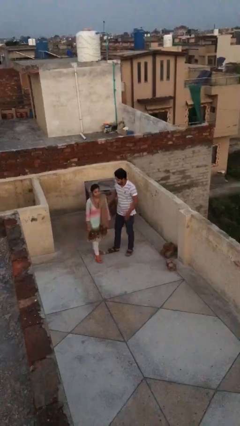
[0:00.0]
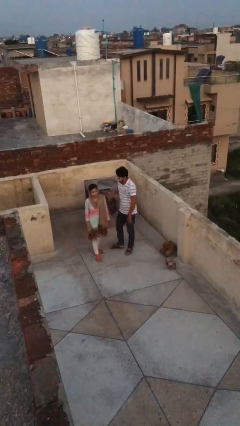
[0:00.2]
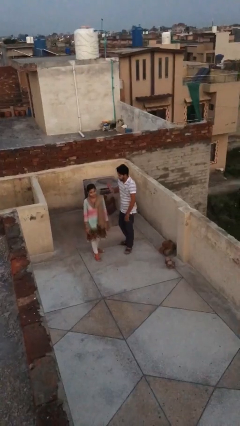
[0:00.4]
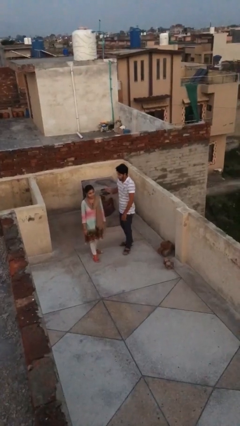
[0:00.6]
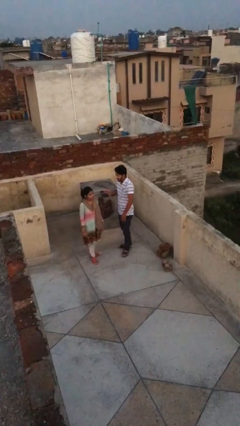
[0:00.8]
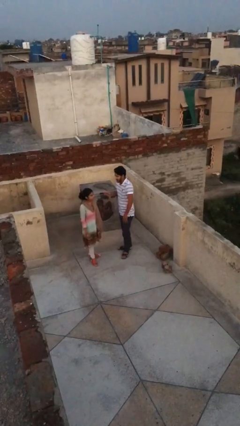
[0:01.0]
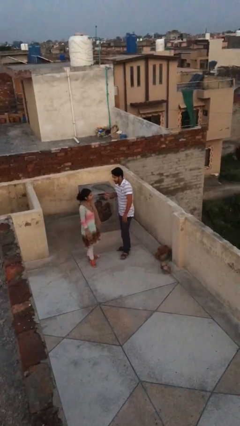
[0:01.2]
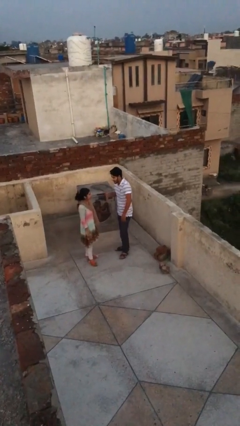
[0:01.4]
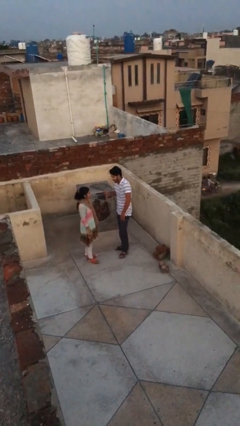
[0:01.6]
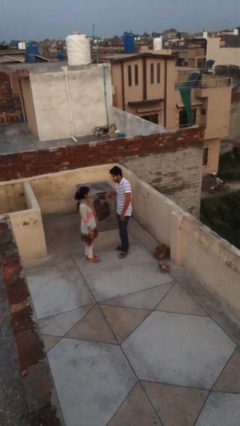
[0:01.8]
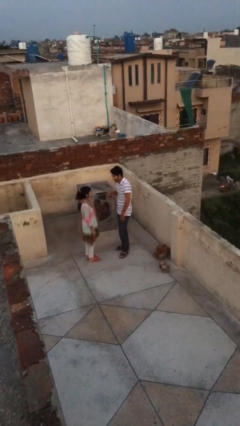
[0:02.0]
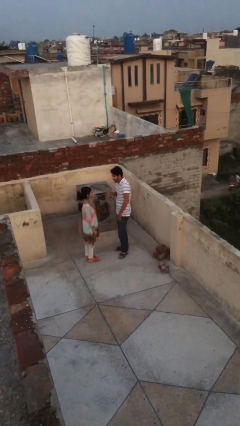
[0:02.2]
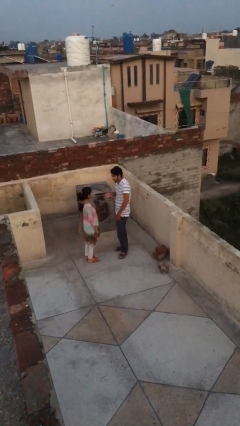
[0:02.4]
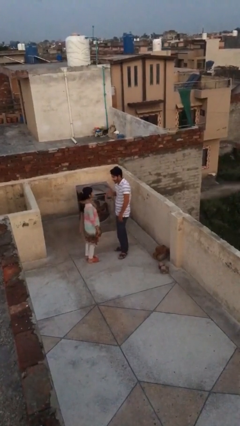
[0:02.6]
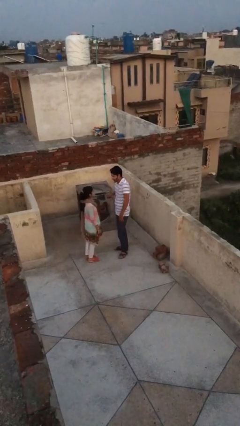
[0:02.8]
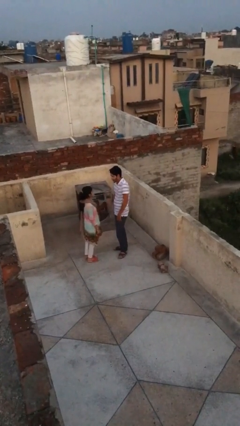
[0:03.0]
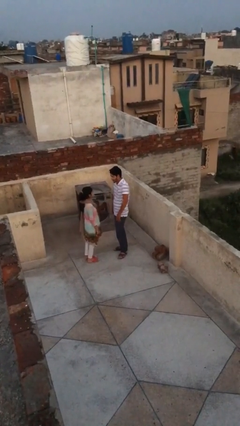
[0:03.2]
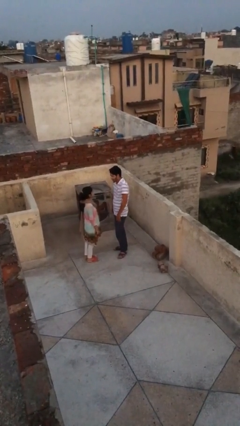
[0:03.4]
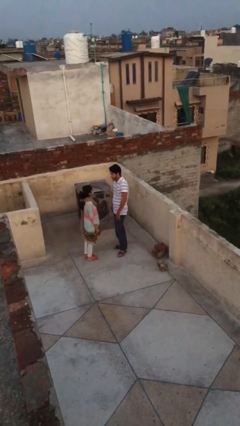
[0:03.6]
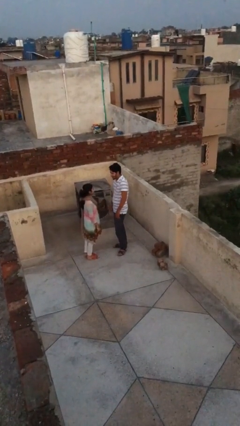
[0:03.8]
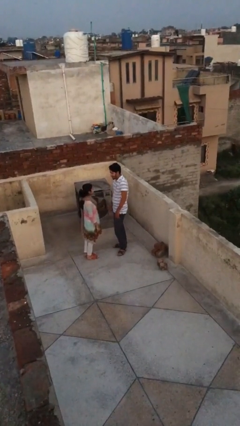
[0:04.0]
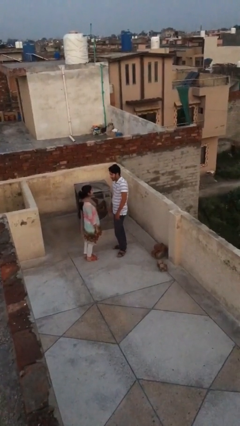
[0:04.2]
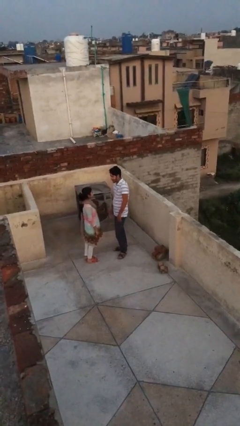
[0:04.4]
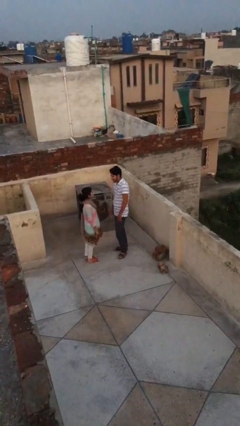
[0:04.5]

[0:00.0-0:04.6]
person talks to person

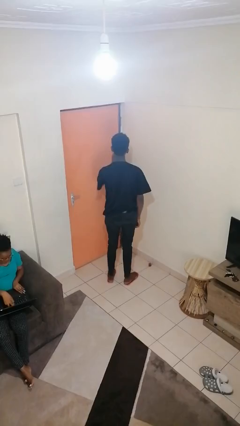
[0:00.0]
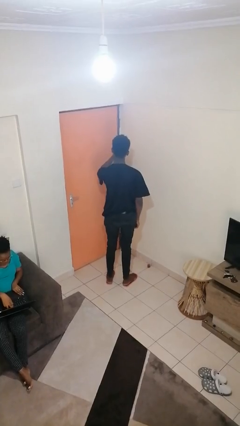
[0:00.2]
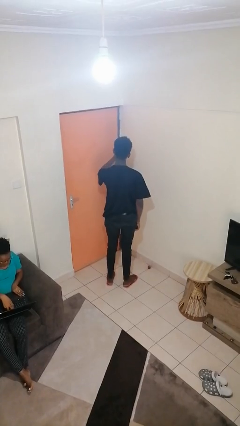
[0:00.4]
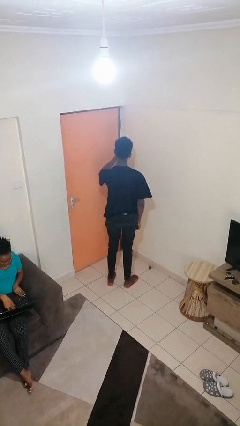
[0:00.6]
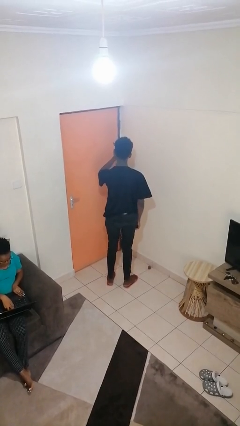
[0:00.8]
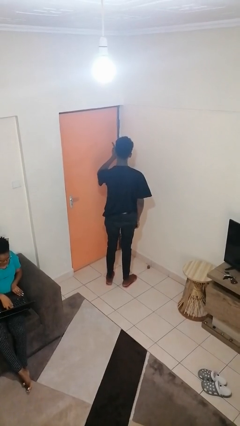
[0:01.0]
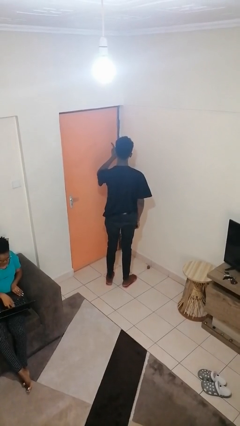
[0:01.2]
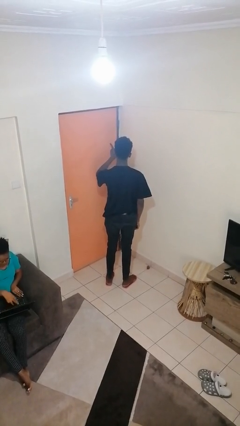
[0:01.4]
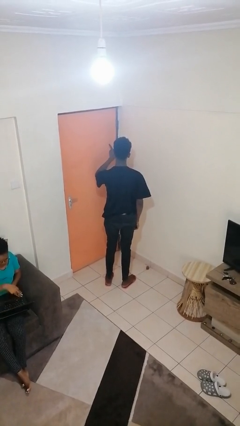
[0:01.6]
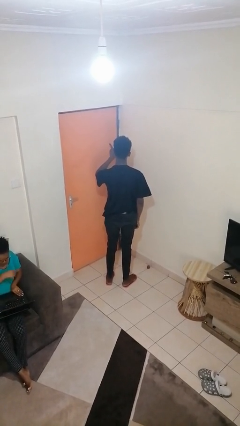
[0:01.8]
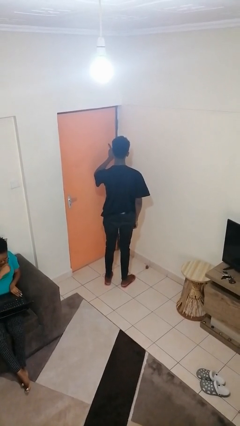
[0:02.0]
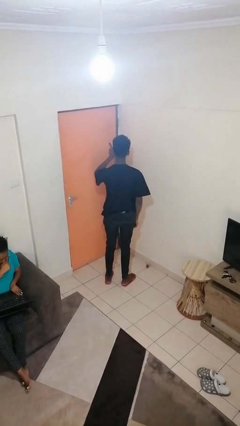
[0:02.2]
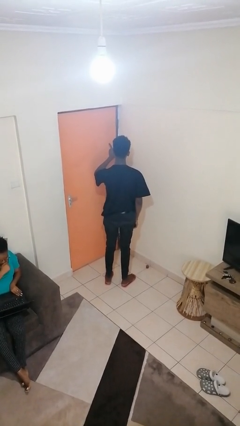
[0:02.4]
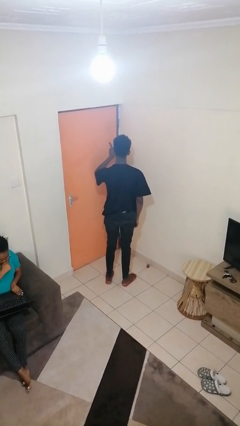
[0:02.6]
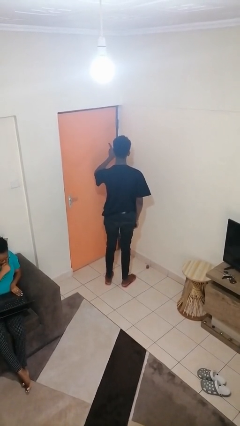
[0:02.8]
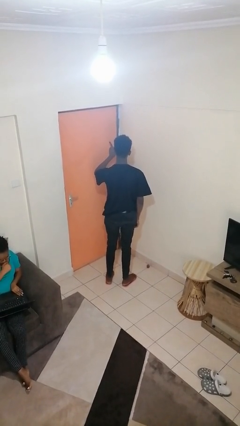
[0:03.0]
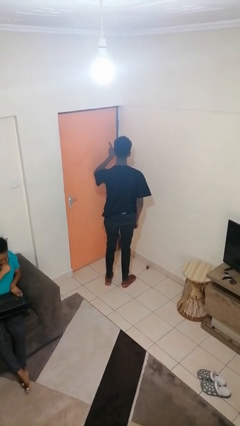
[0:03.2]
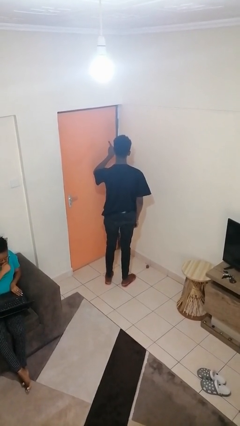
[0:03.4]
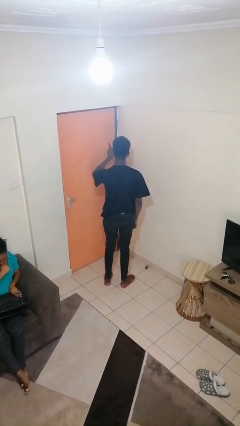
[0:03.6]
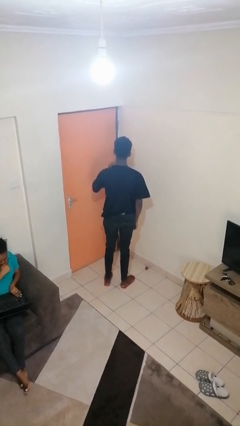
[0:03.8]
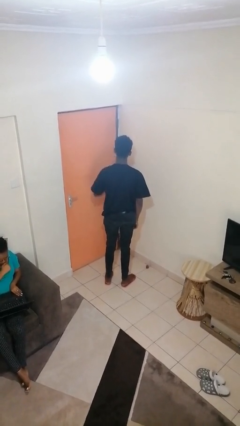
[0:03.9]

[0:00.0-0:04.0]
person gestures peace

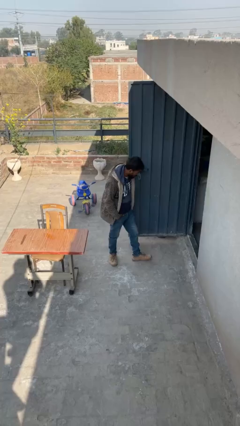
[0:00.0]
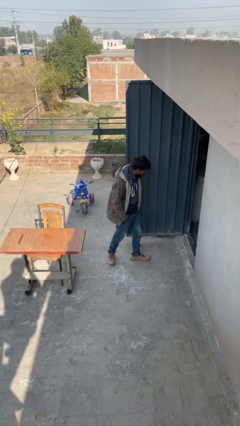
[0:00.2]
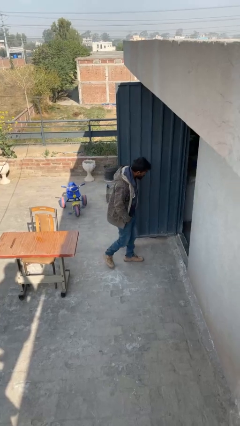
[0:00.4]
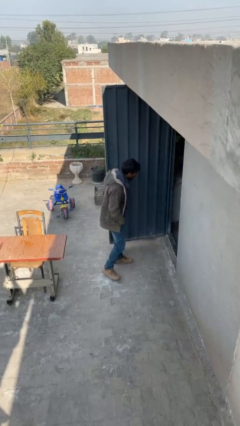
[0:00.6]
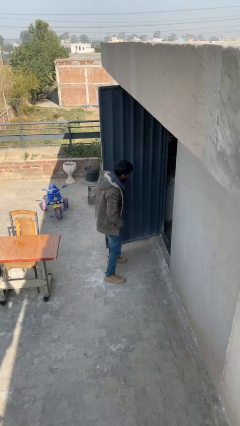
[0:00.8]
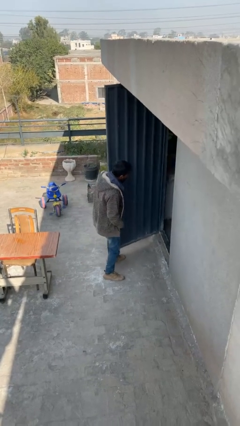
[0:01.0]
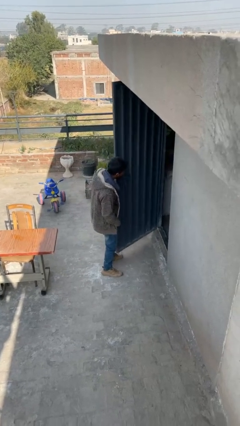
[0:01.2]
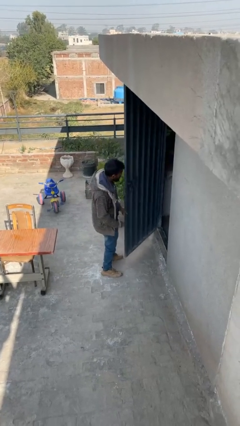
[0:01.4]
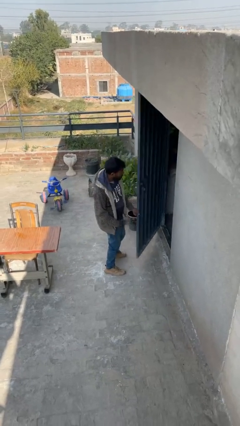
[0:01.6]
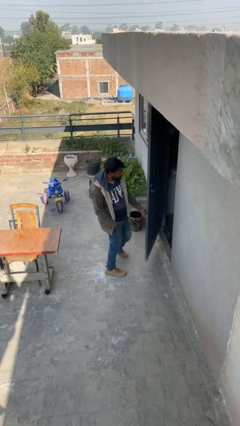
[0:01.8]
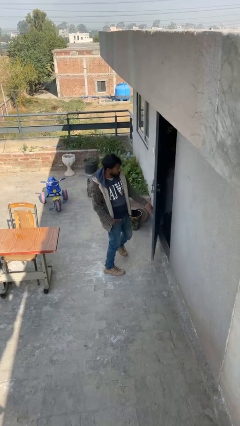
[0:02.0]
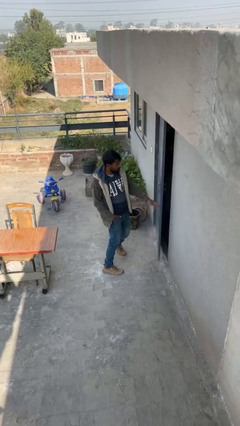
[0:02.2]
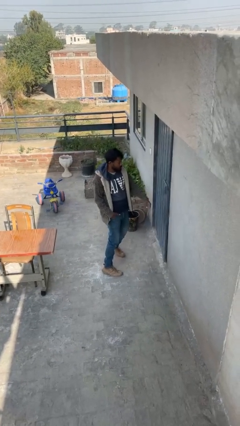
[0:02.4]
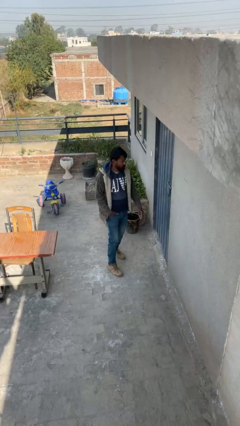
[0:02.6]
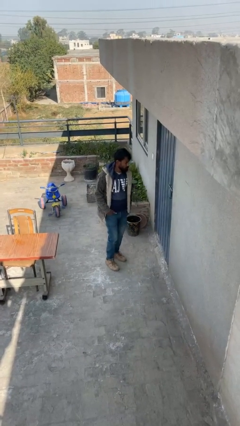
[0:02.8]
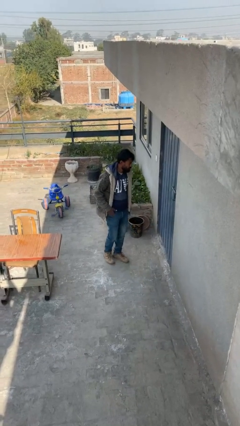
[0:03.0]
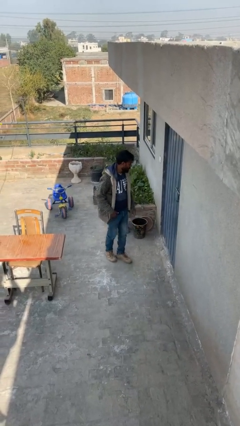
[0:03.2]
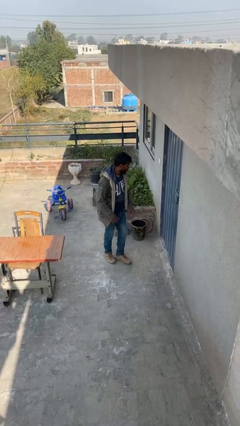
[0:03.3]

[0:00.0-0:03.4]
person closes facility door

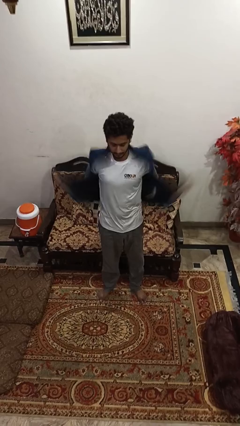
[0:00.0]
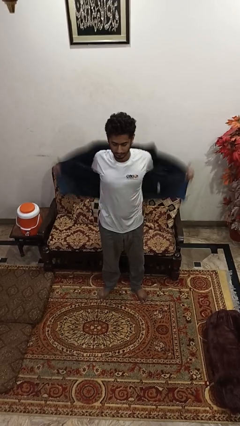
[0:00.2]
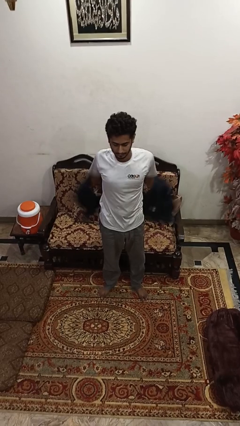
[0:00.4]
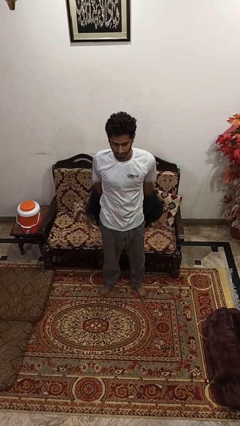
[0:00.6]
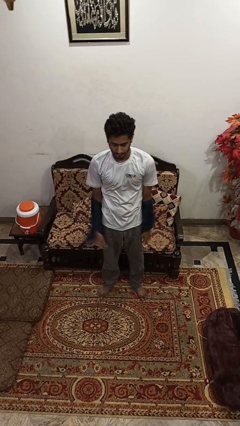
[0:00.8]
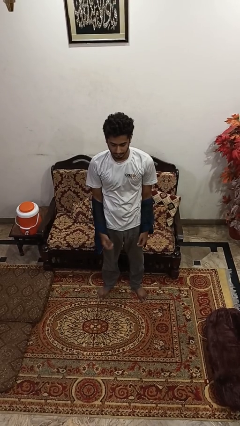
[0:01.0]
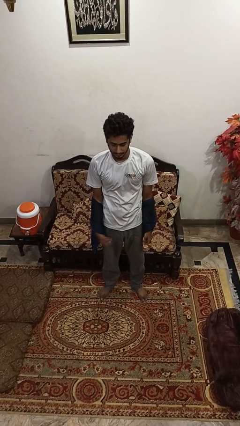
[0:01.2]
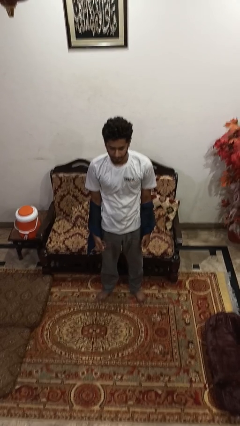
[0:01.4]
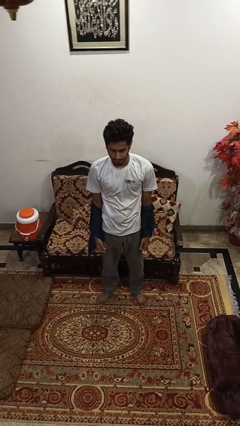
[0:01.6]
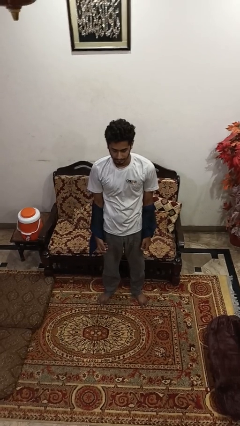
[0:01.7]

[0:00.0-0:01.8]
person takes off jacket

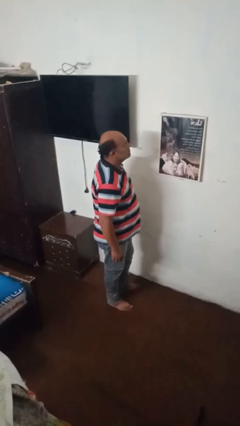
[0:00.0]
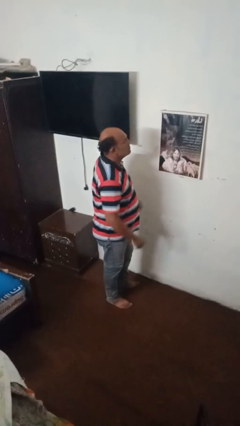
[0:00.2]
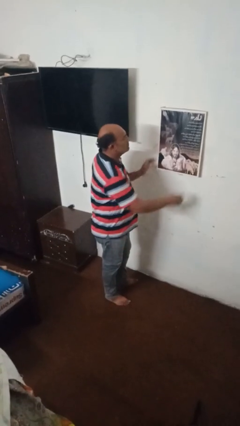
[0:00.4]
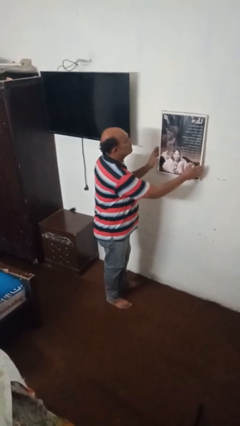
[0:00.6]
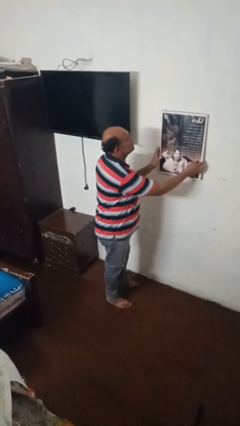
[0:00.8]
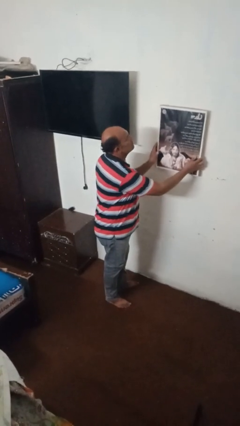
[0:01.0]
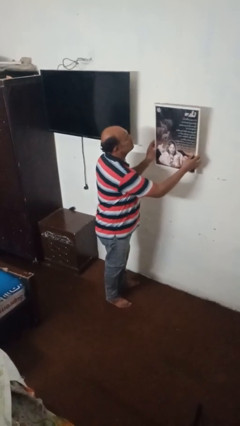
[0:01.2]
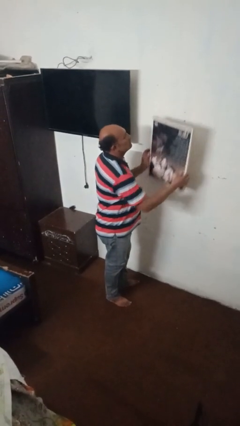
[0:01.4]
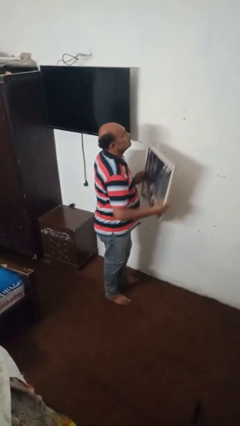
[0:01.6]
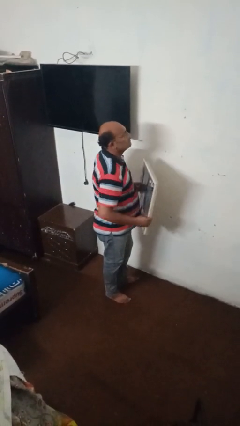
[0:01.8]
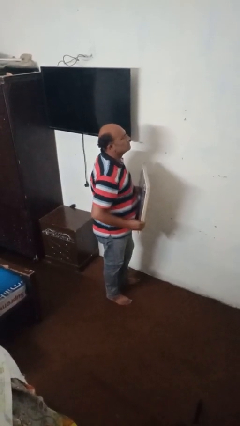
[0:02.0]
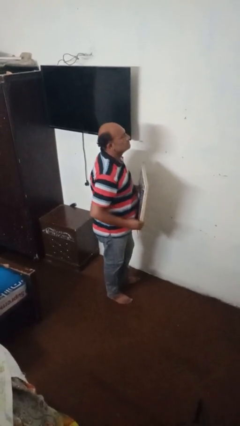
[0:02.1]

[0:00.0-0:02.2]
person takes down picture frame

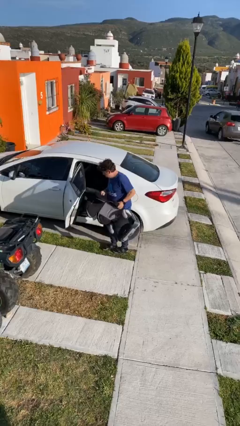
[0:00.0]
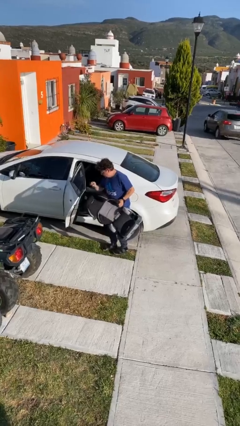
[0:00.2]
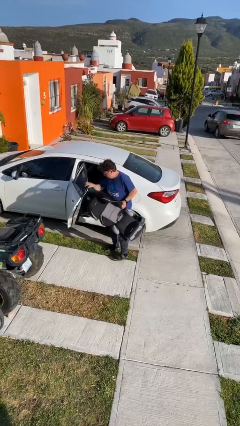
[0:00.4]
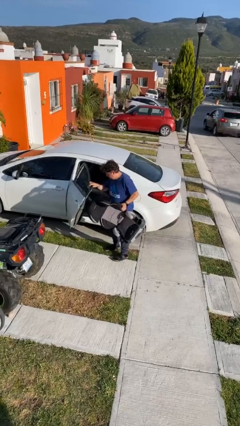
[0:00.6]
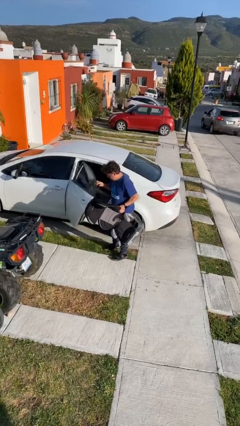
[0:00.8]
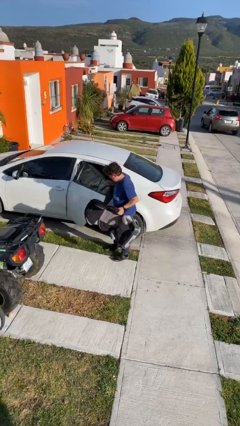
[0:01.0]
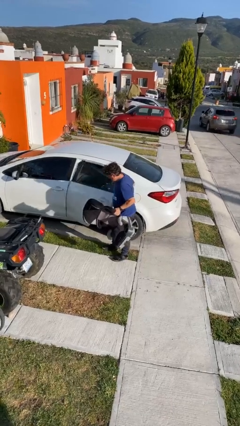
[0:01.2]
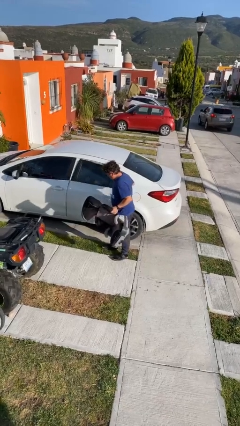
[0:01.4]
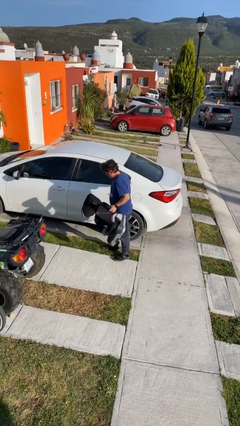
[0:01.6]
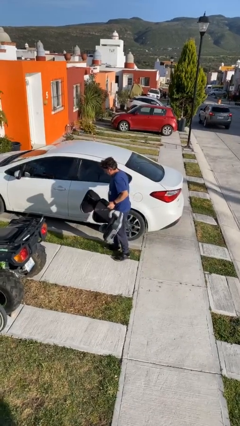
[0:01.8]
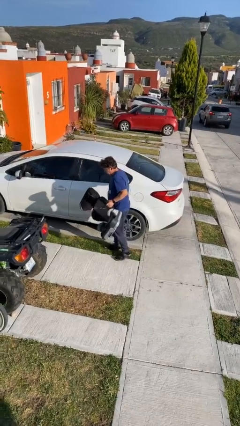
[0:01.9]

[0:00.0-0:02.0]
person closes car door
